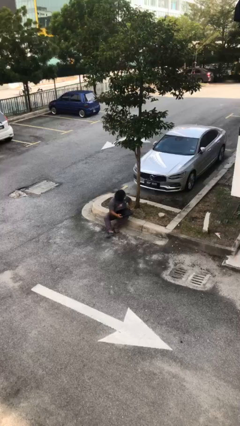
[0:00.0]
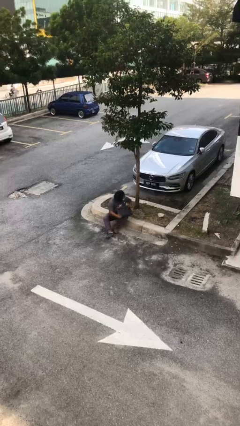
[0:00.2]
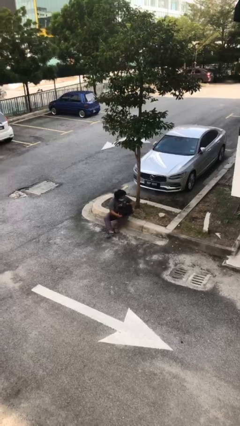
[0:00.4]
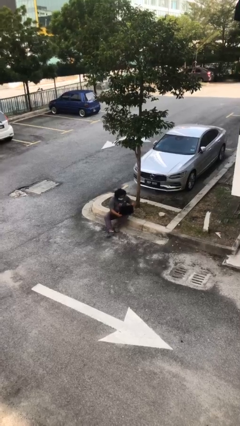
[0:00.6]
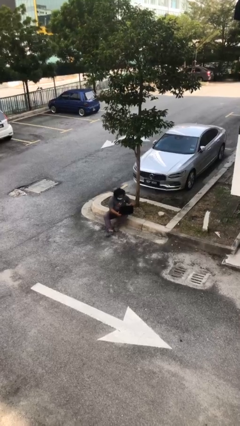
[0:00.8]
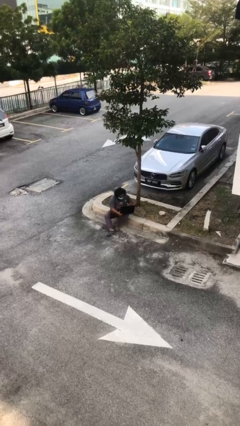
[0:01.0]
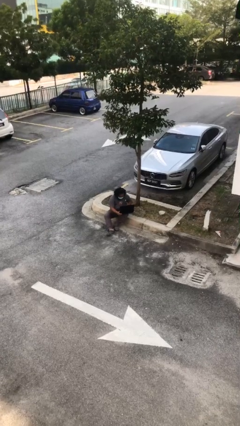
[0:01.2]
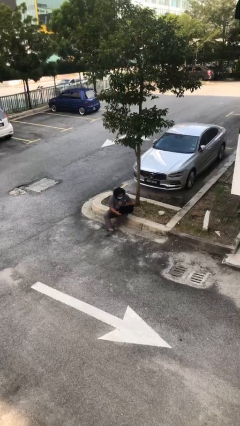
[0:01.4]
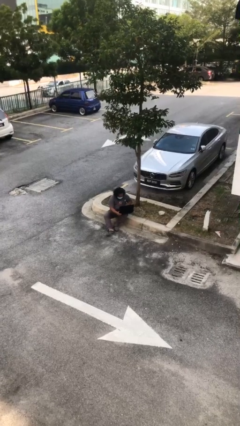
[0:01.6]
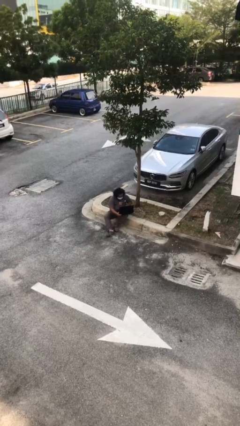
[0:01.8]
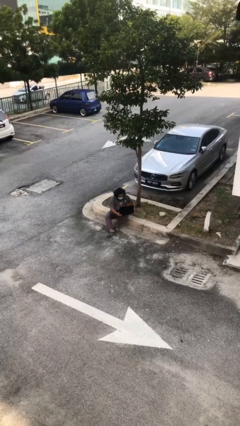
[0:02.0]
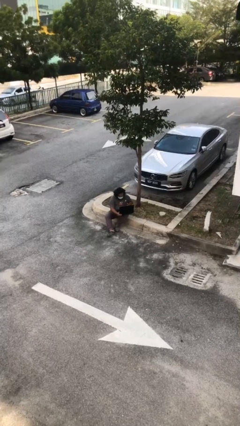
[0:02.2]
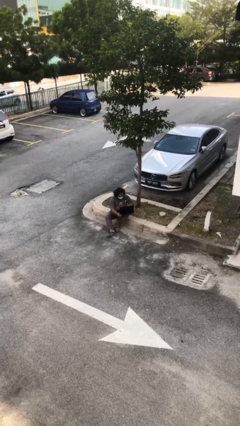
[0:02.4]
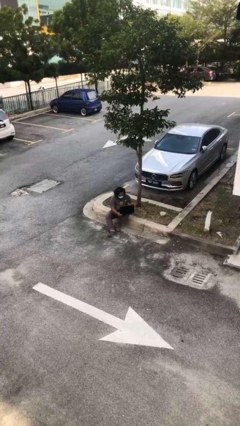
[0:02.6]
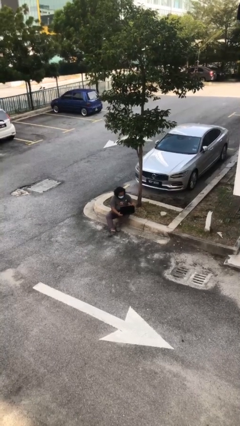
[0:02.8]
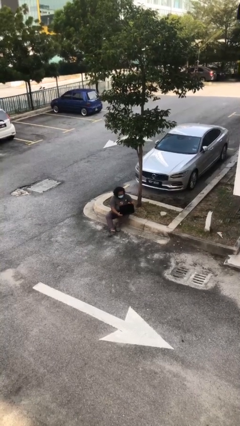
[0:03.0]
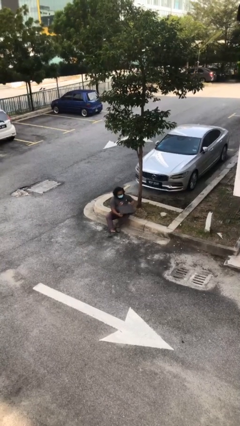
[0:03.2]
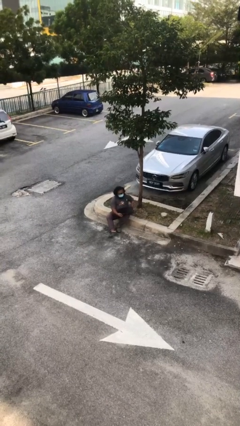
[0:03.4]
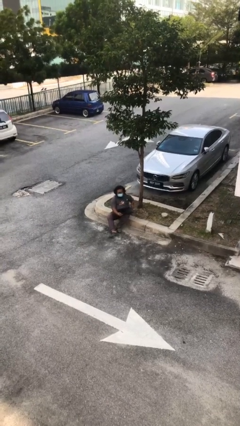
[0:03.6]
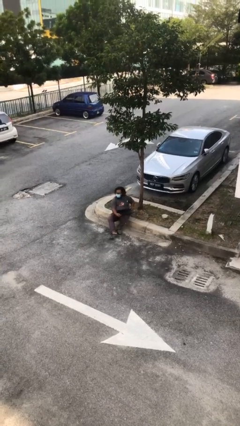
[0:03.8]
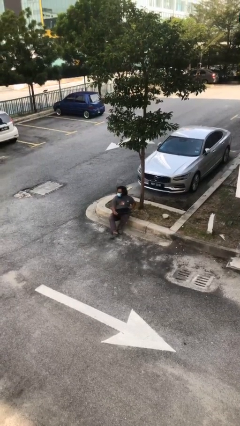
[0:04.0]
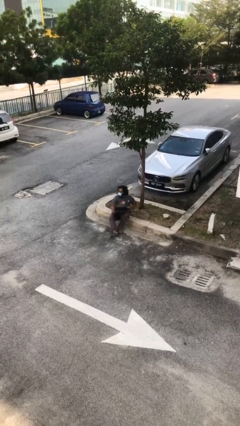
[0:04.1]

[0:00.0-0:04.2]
person interacts with laptop

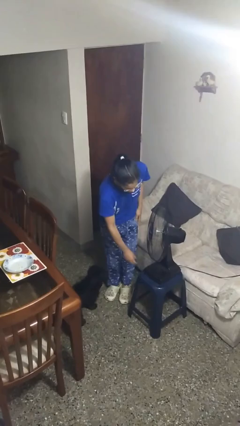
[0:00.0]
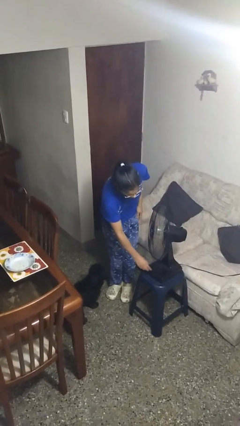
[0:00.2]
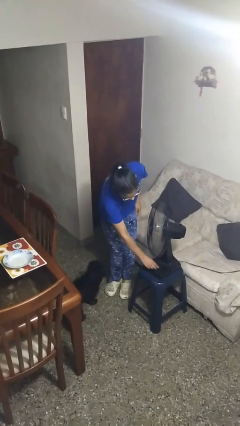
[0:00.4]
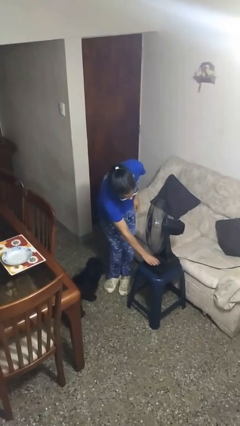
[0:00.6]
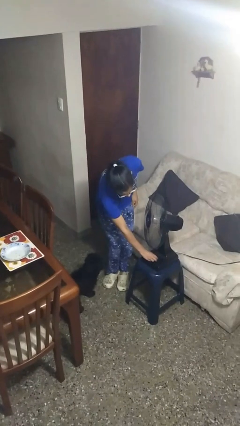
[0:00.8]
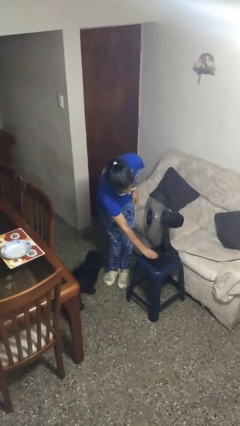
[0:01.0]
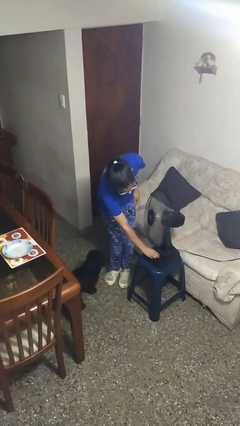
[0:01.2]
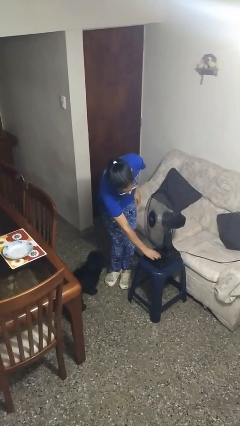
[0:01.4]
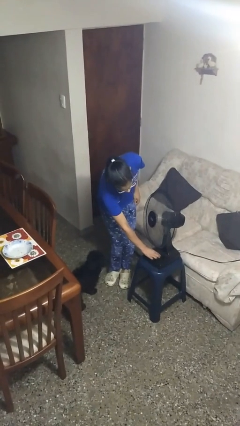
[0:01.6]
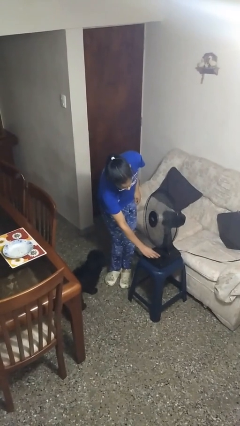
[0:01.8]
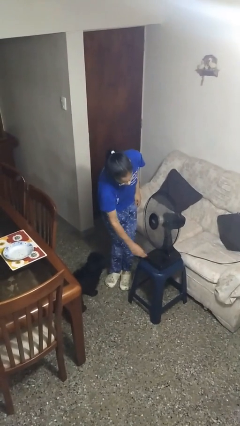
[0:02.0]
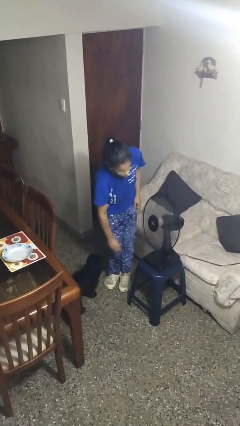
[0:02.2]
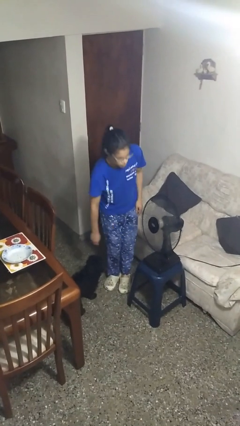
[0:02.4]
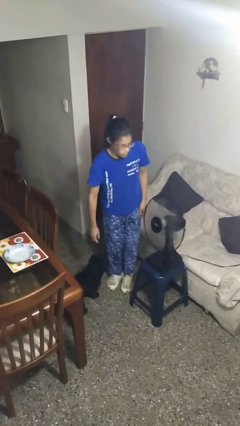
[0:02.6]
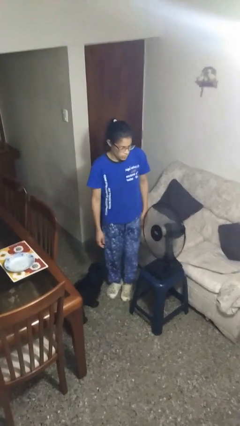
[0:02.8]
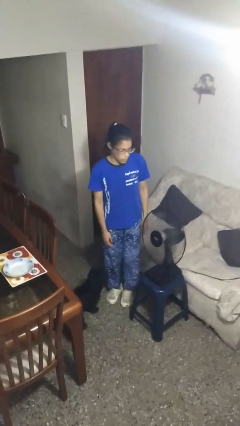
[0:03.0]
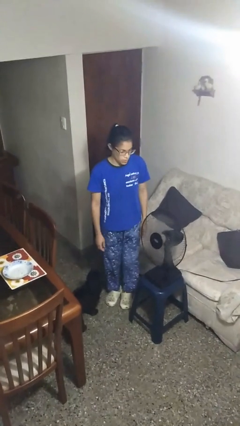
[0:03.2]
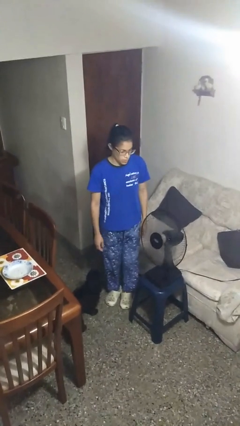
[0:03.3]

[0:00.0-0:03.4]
person turns off fan

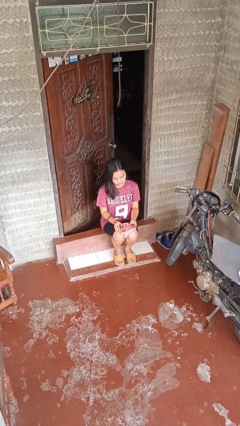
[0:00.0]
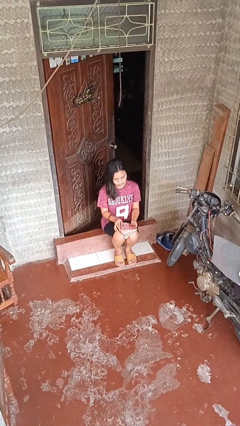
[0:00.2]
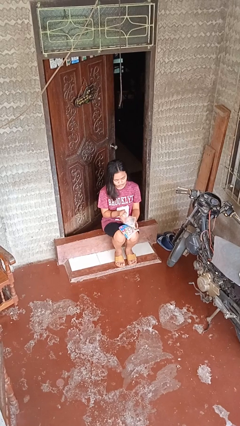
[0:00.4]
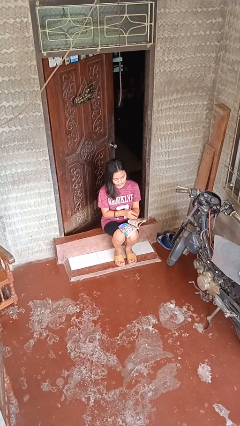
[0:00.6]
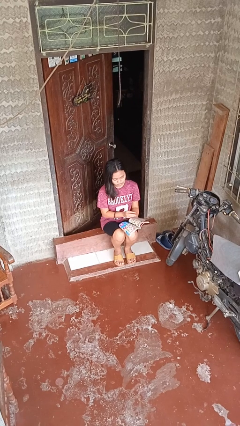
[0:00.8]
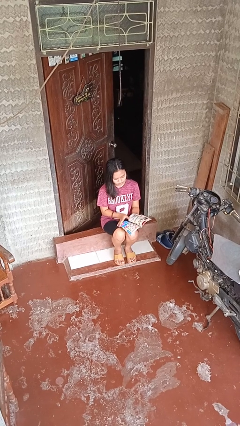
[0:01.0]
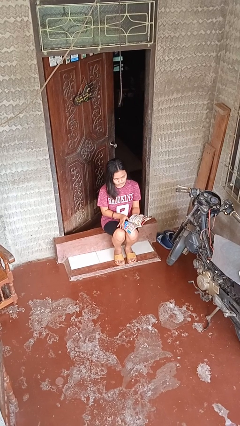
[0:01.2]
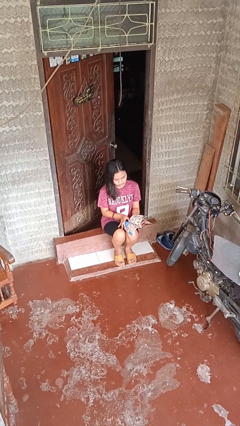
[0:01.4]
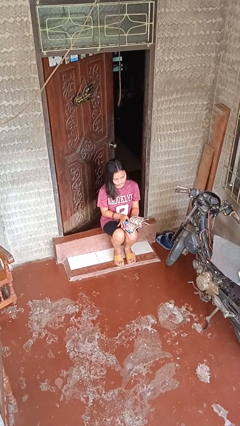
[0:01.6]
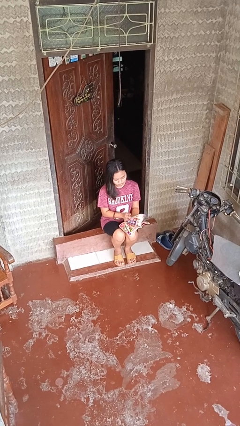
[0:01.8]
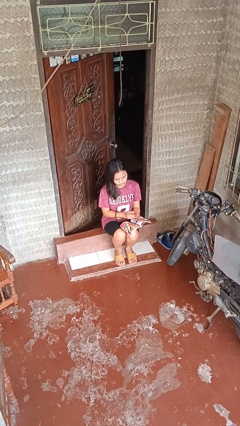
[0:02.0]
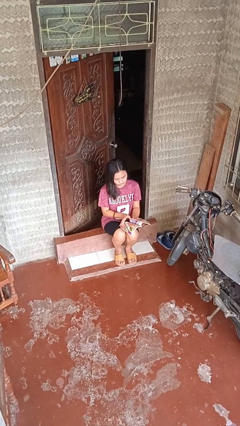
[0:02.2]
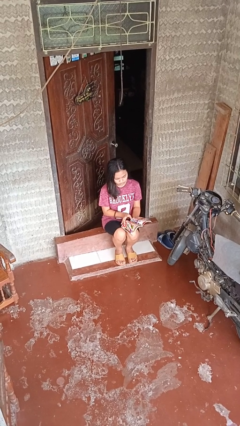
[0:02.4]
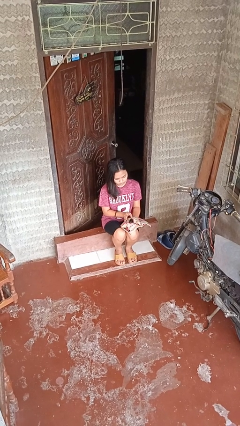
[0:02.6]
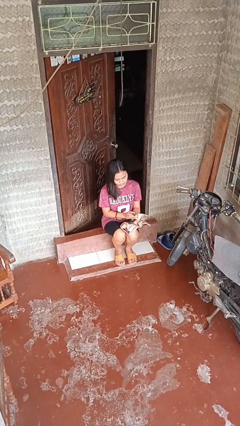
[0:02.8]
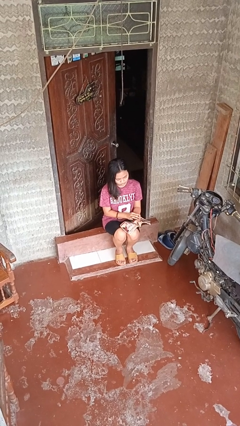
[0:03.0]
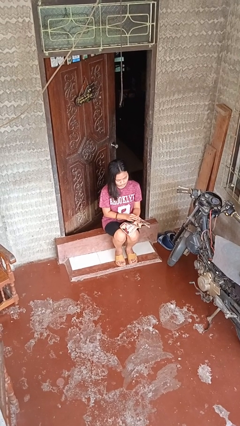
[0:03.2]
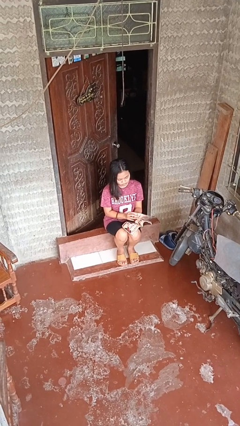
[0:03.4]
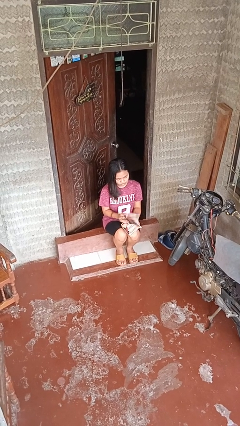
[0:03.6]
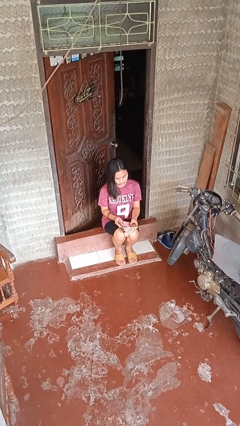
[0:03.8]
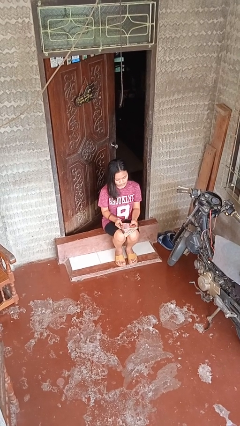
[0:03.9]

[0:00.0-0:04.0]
person reads magazine

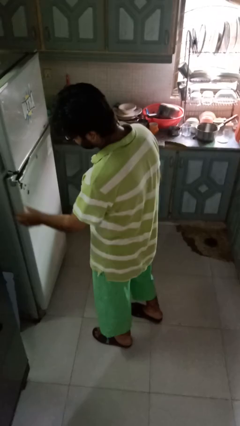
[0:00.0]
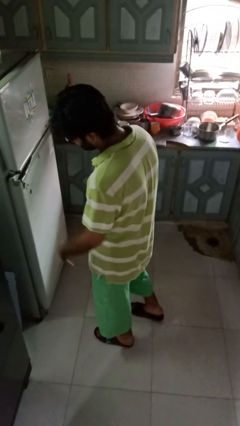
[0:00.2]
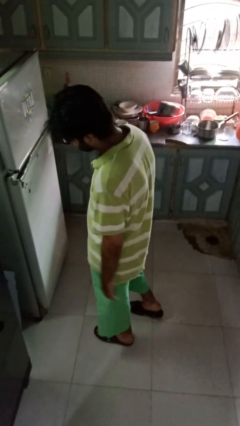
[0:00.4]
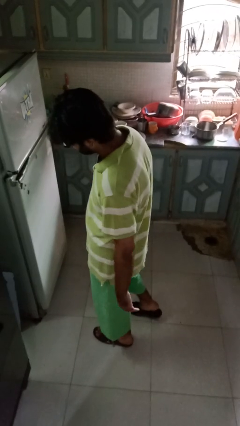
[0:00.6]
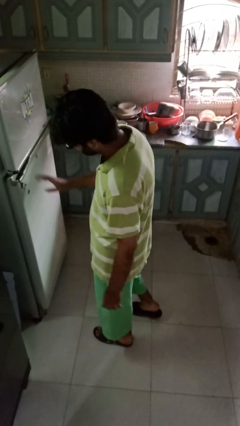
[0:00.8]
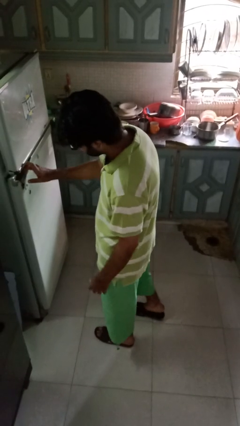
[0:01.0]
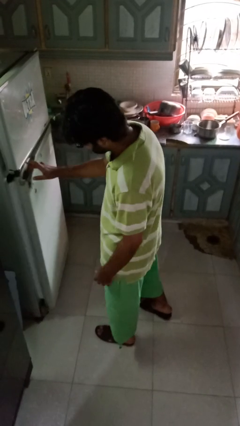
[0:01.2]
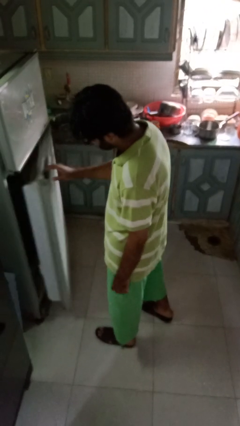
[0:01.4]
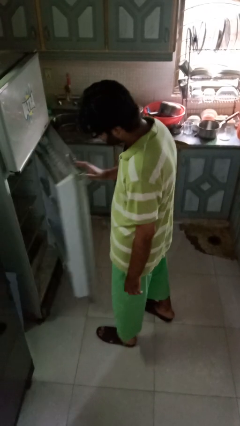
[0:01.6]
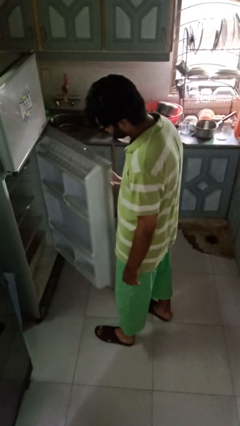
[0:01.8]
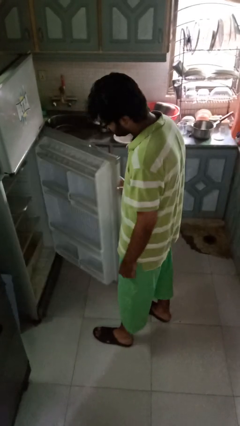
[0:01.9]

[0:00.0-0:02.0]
person opens refrigerator

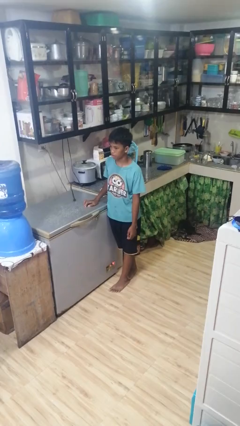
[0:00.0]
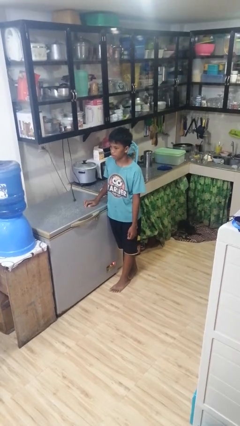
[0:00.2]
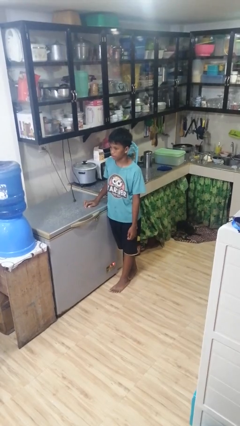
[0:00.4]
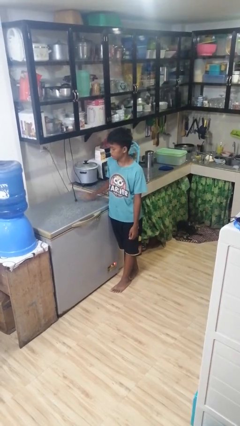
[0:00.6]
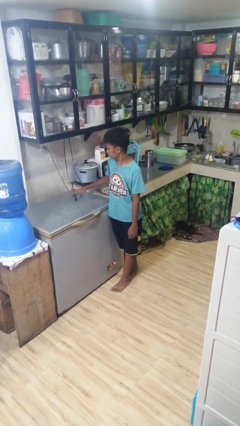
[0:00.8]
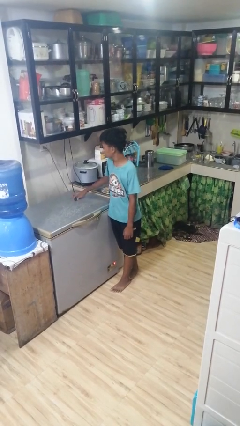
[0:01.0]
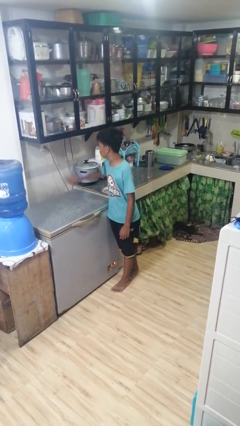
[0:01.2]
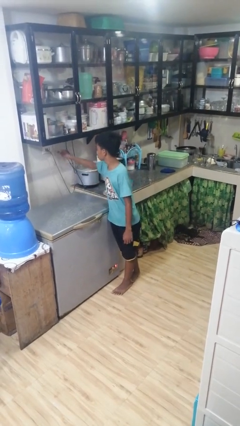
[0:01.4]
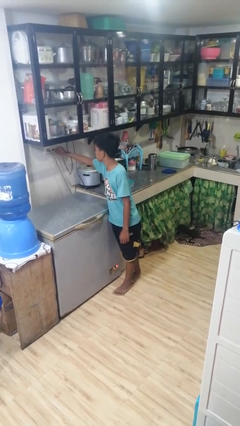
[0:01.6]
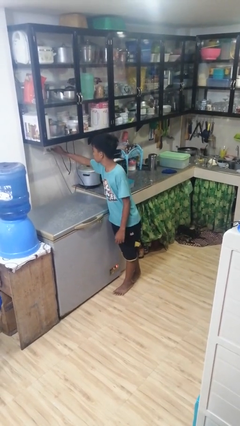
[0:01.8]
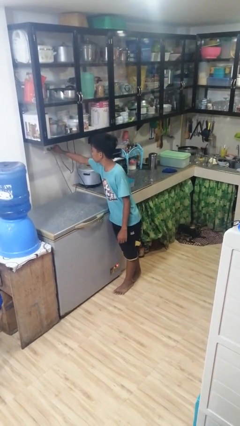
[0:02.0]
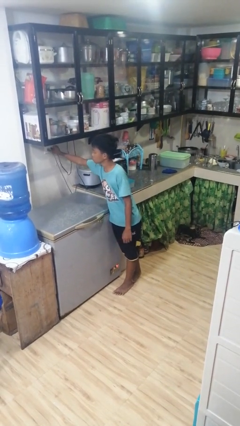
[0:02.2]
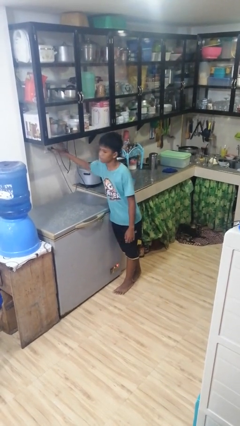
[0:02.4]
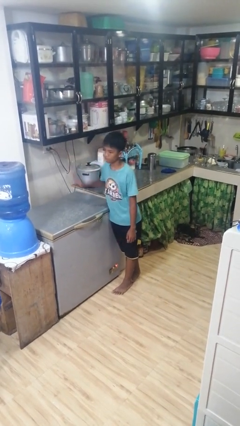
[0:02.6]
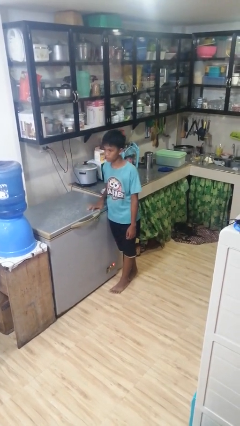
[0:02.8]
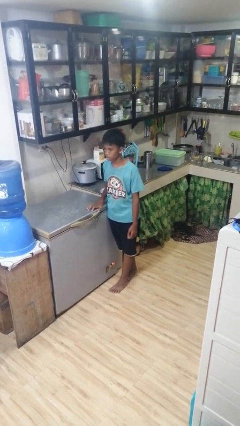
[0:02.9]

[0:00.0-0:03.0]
person plugs into electrical socket

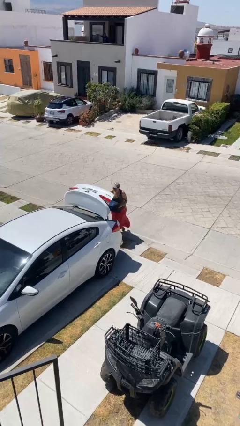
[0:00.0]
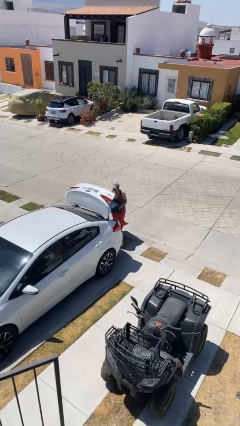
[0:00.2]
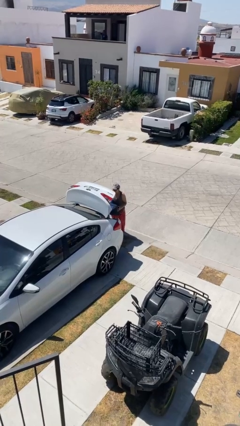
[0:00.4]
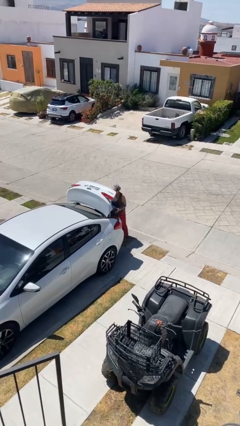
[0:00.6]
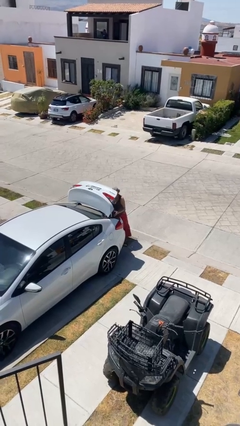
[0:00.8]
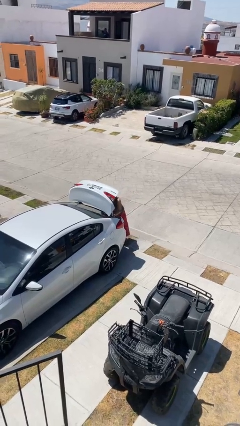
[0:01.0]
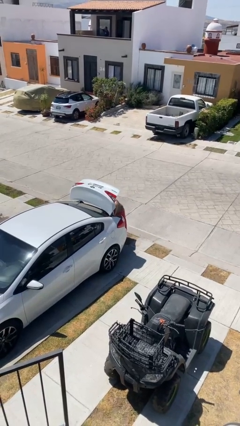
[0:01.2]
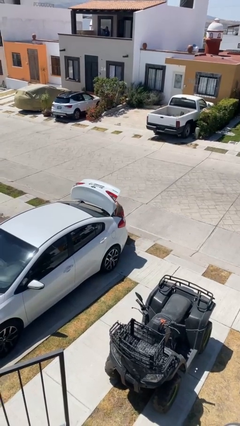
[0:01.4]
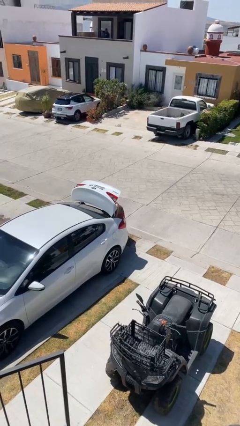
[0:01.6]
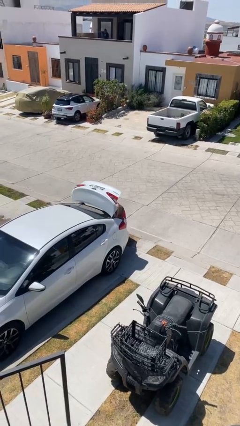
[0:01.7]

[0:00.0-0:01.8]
person loads car
